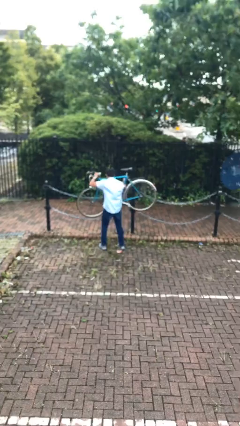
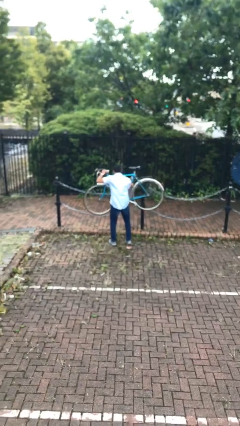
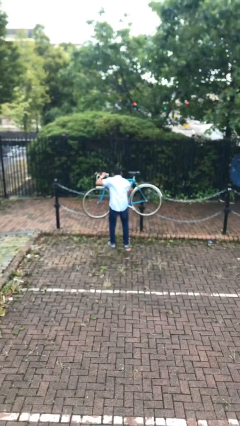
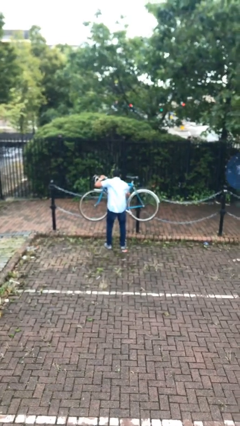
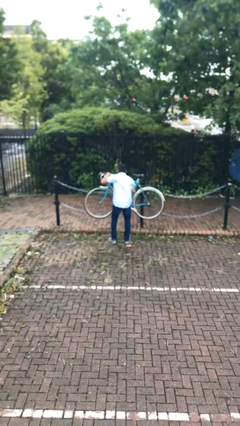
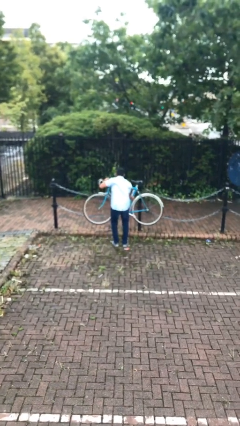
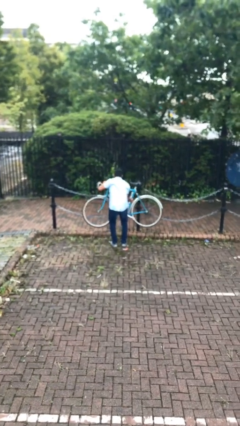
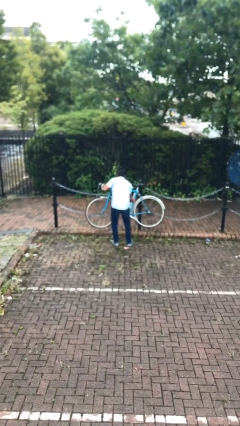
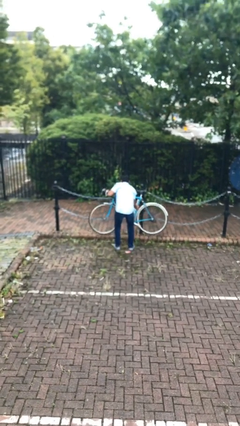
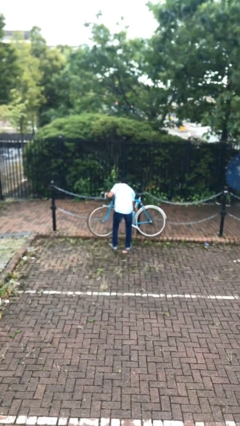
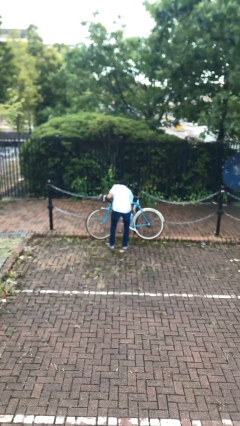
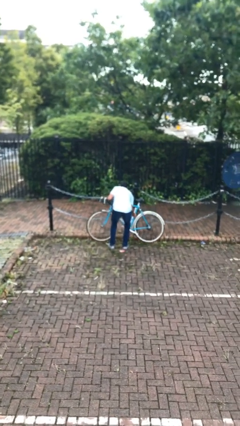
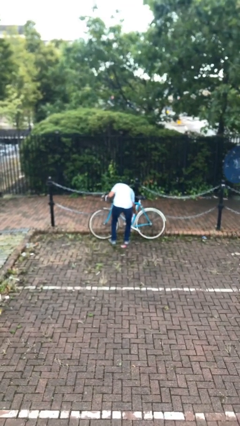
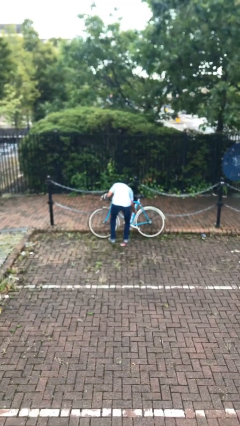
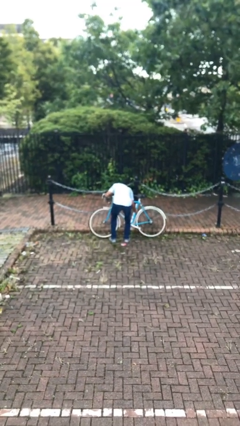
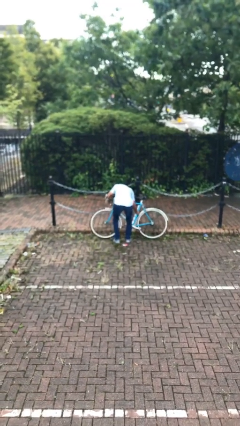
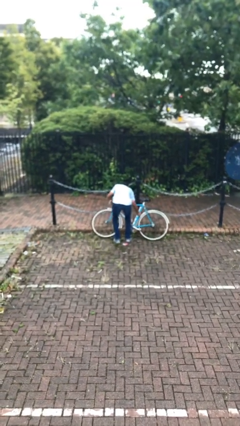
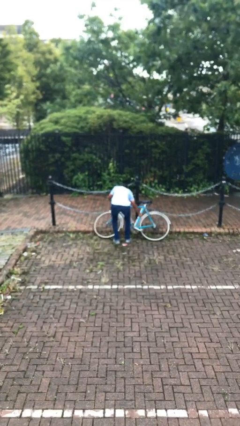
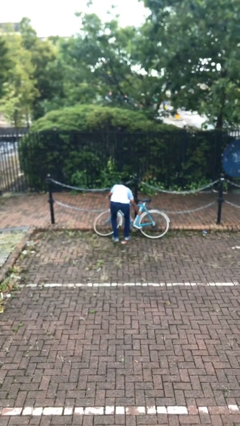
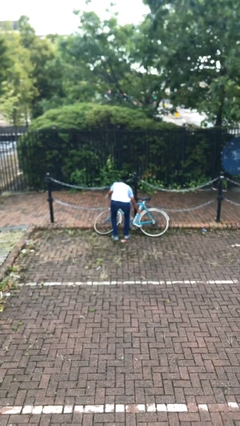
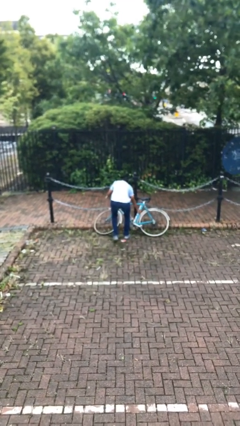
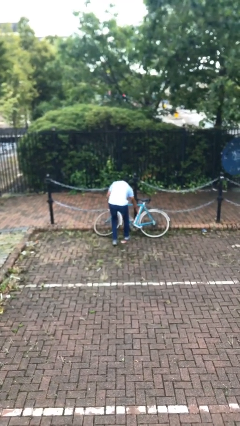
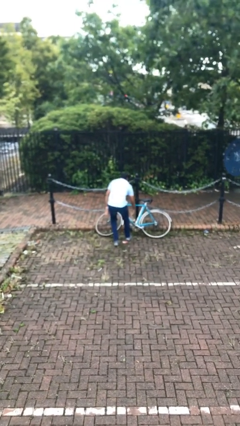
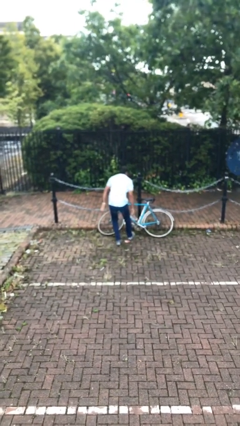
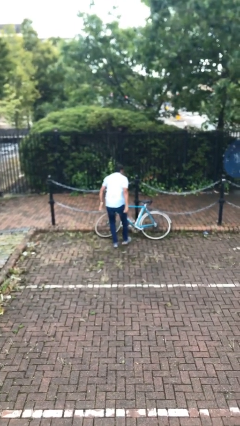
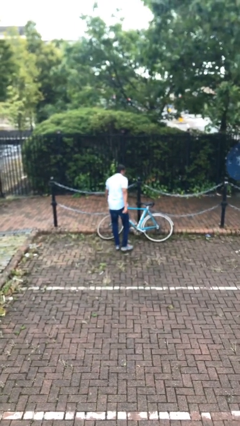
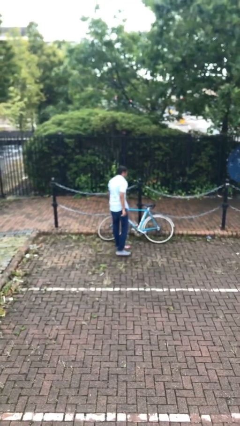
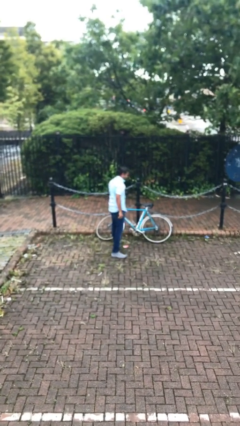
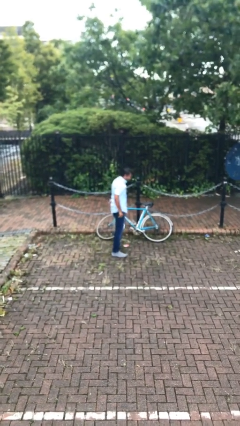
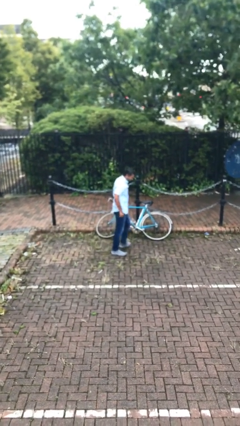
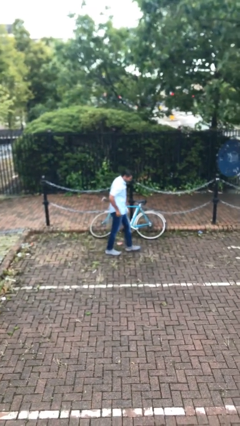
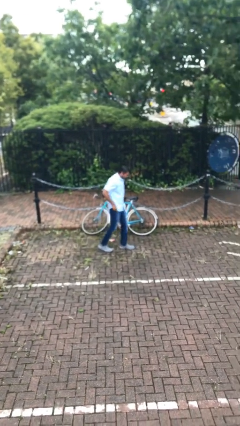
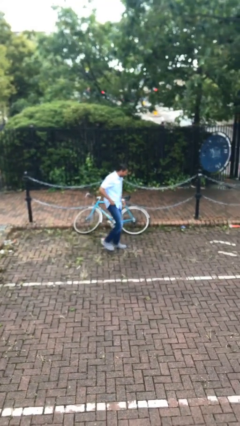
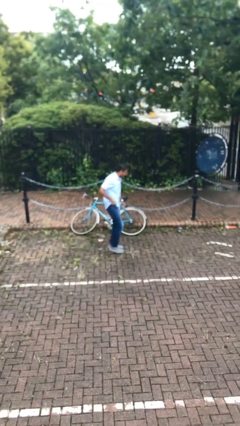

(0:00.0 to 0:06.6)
person puts down object on floor

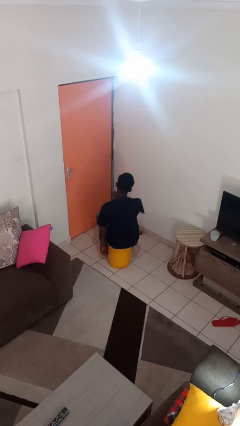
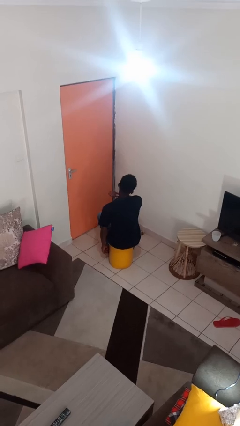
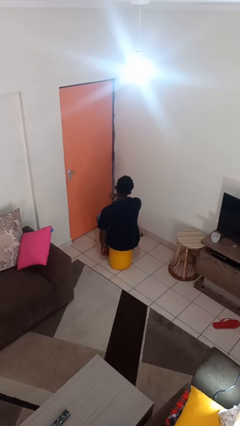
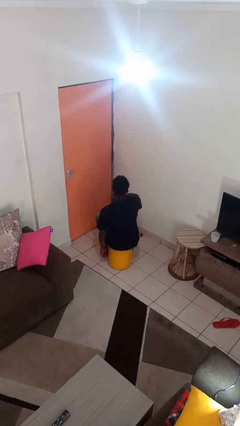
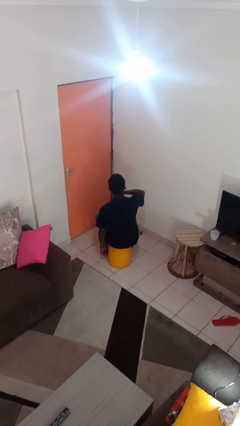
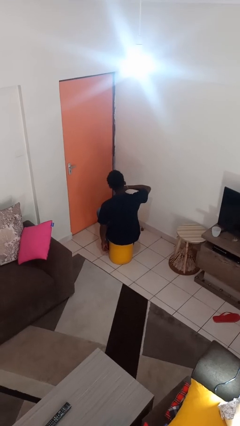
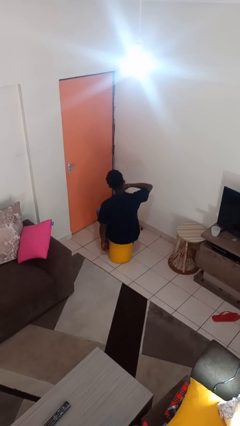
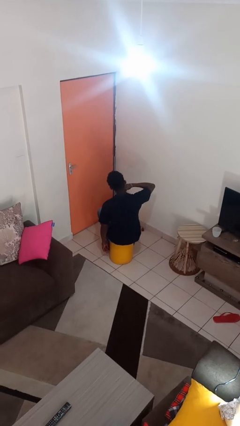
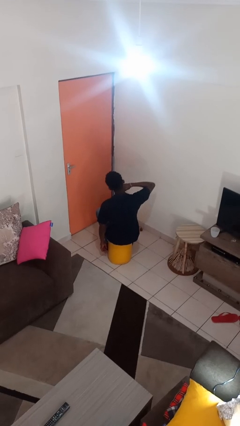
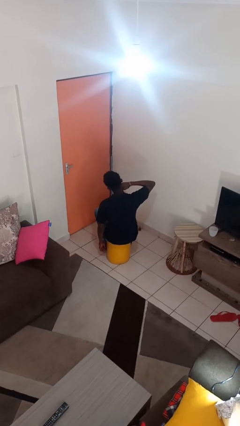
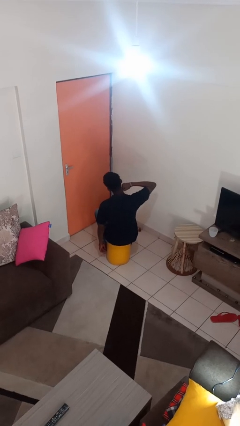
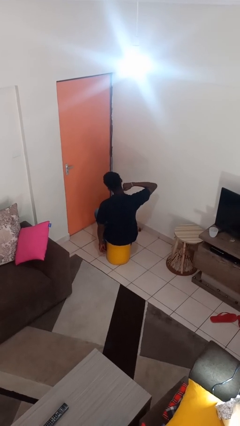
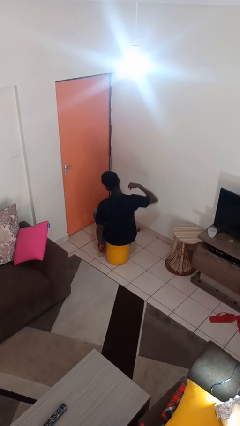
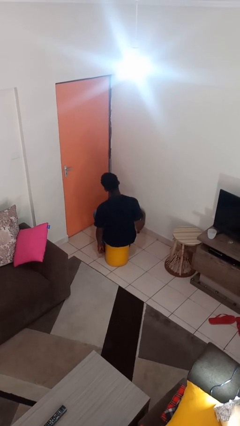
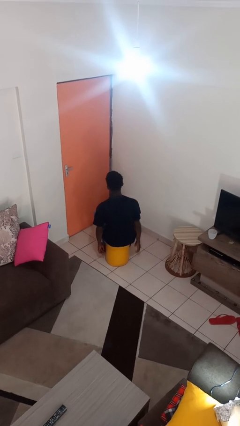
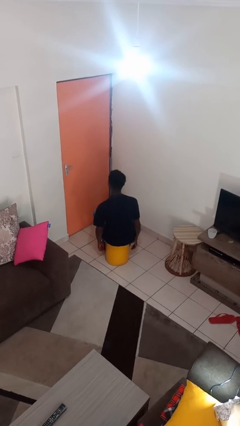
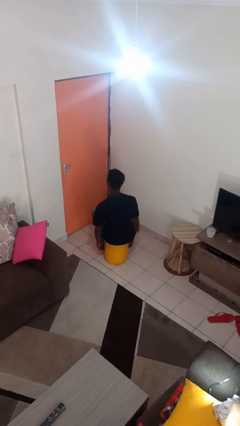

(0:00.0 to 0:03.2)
person gestures cut

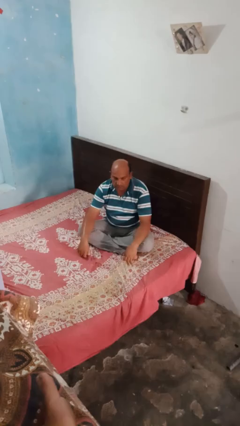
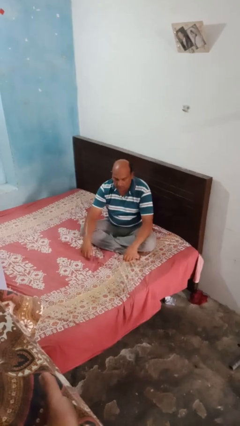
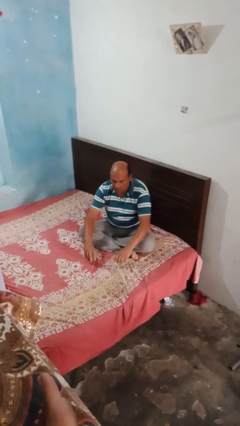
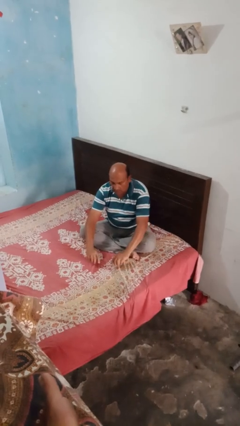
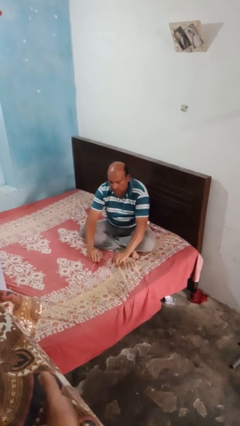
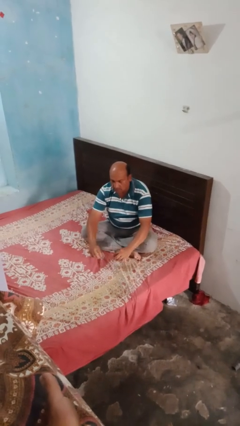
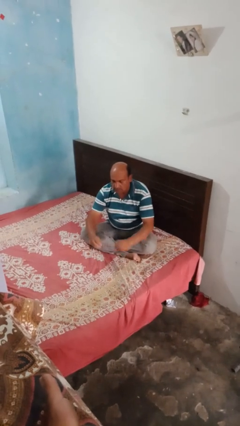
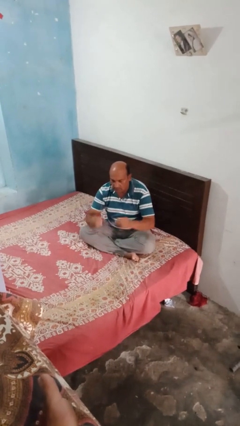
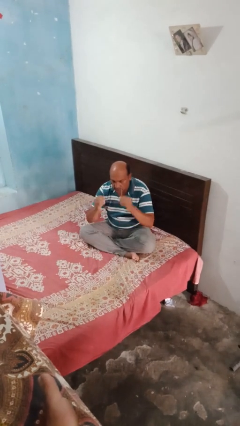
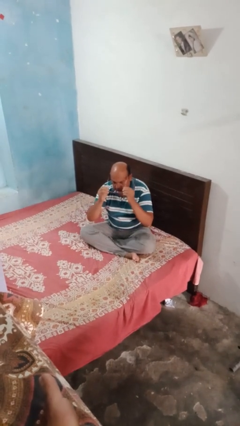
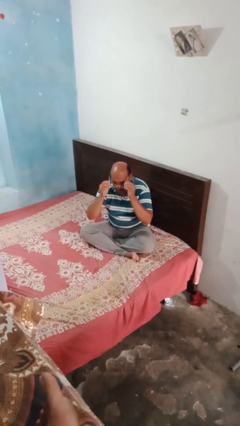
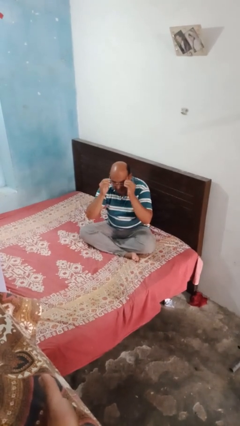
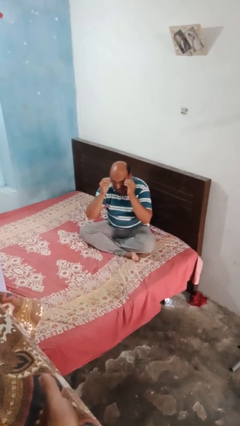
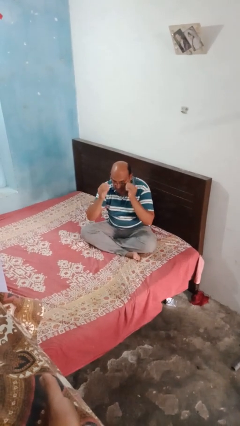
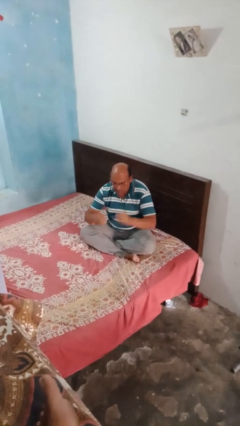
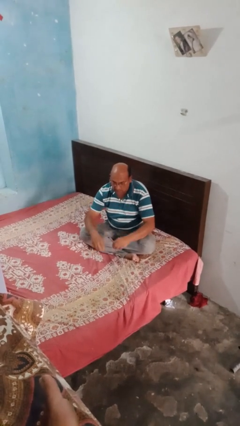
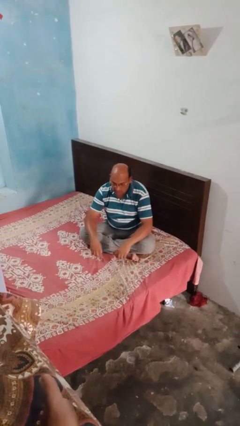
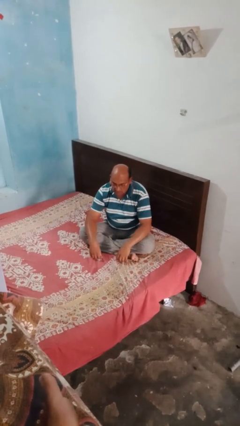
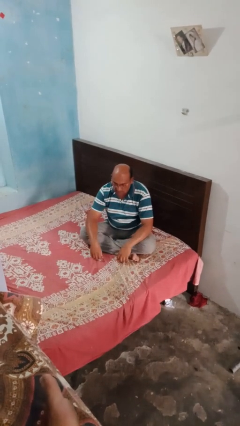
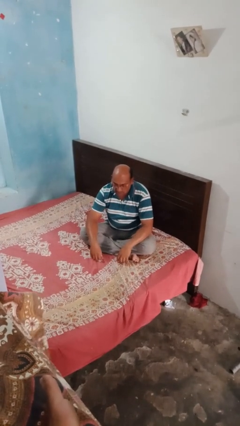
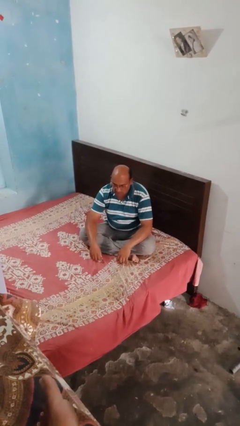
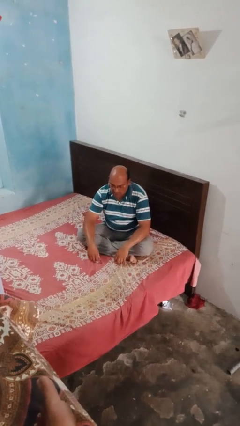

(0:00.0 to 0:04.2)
person puts on glasses

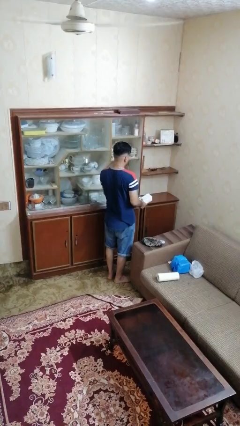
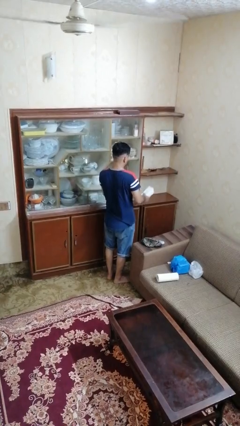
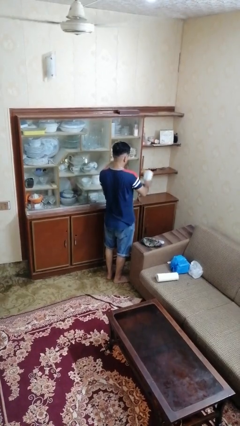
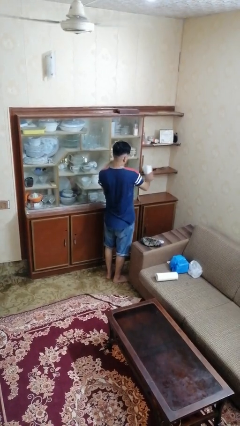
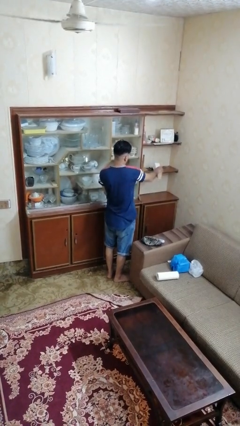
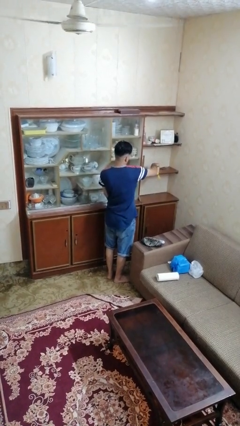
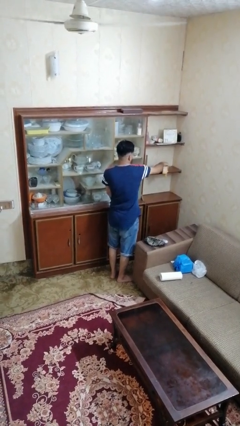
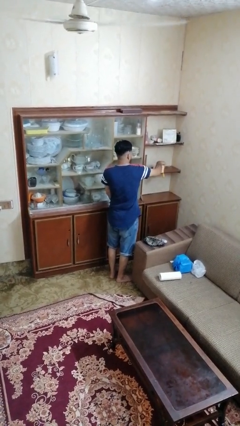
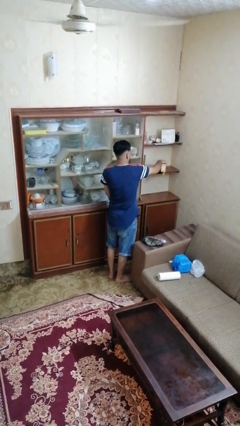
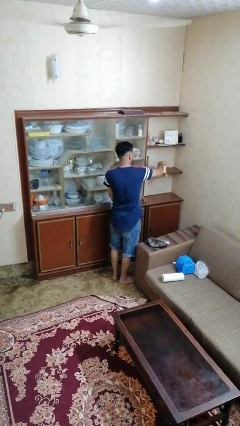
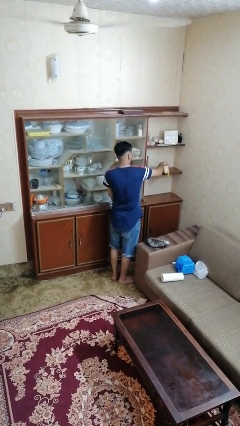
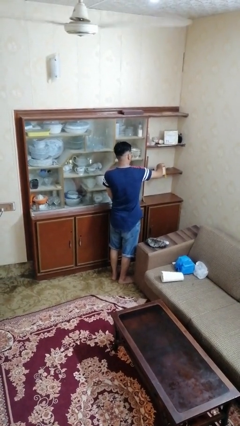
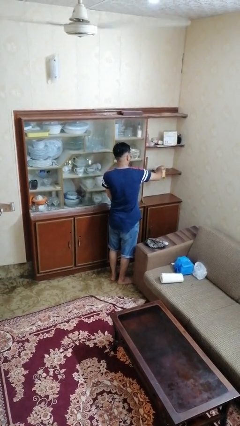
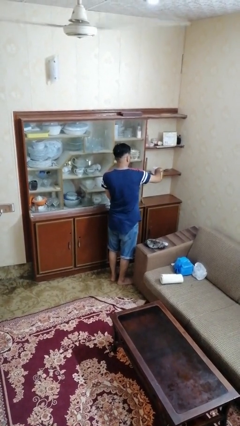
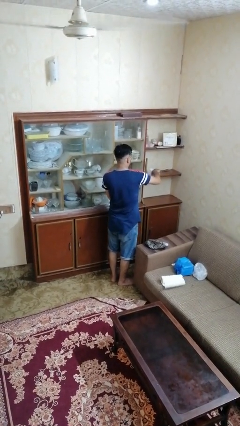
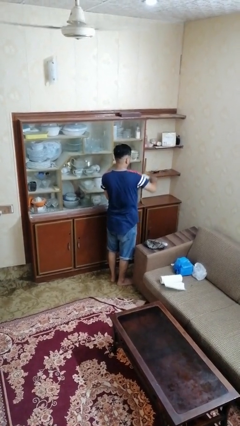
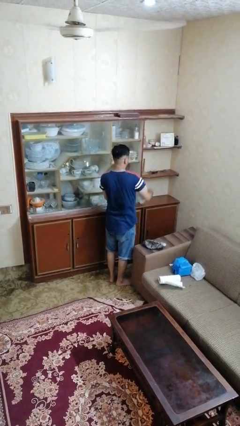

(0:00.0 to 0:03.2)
person dusts furniture

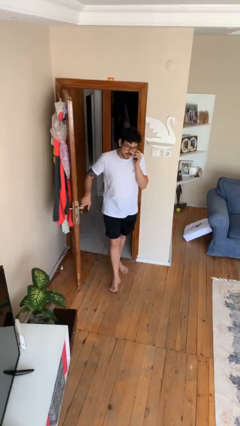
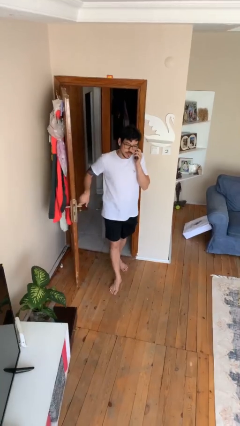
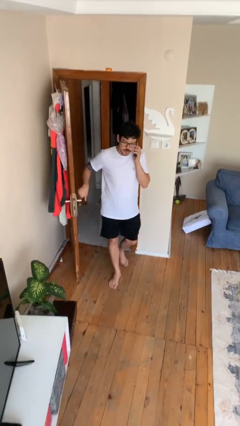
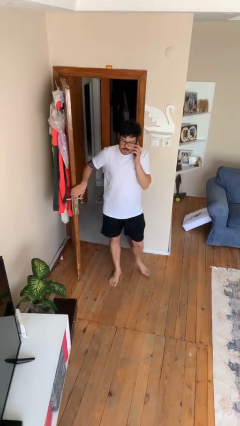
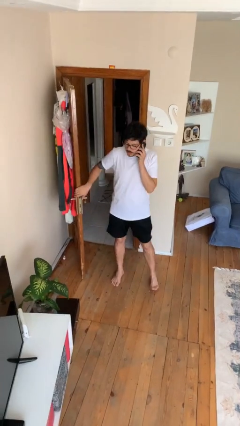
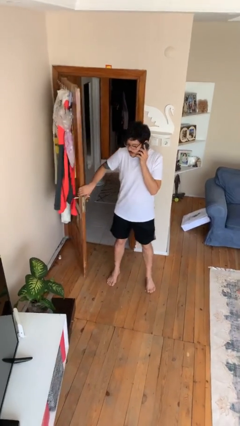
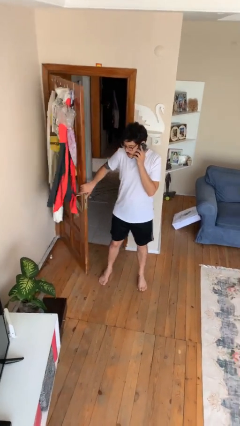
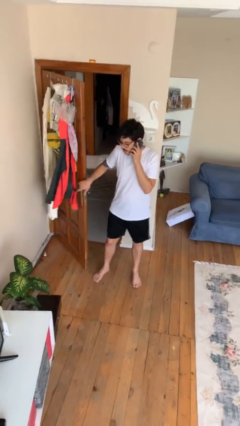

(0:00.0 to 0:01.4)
person enters scene through structure
